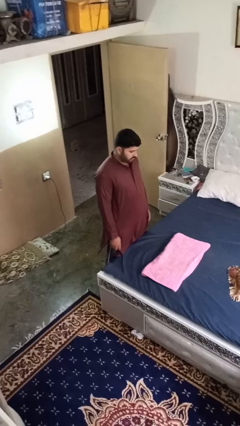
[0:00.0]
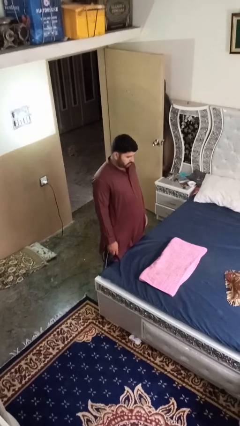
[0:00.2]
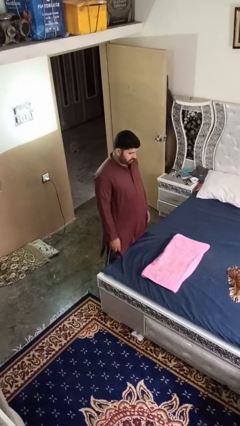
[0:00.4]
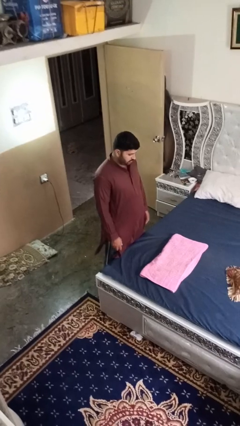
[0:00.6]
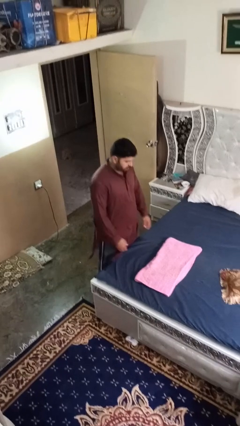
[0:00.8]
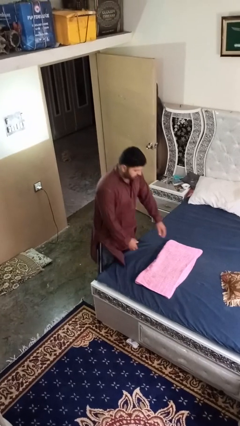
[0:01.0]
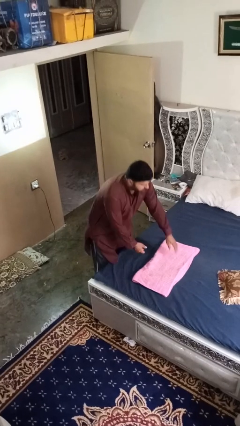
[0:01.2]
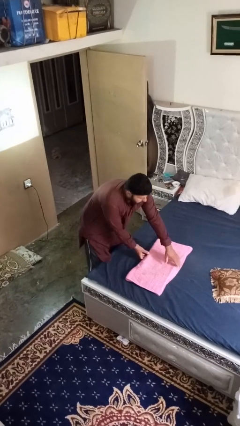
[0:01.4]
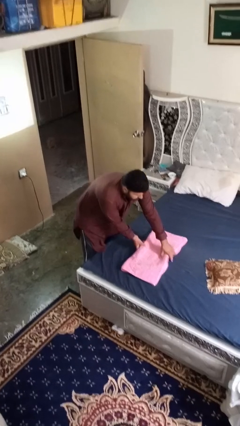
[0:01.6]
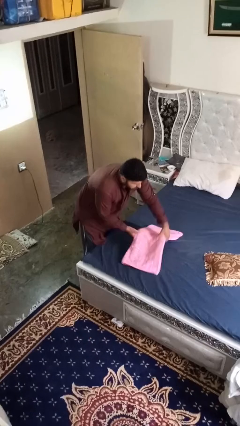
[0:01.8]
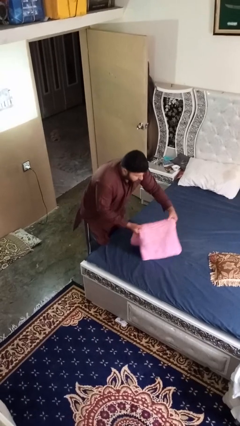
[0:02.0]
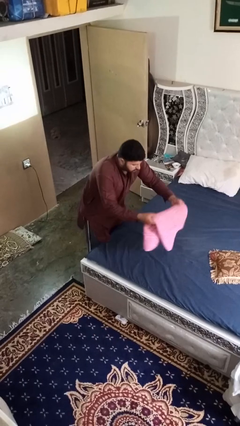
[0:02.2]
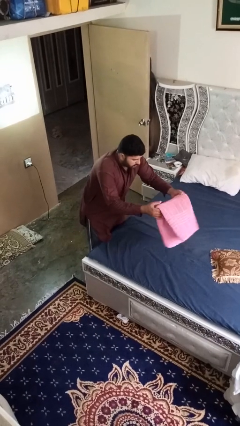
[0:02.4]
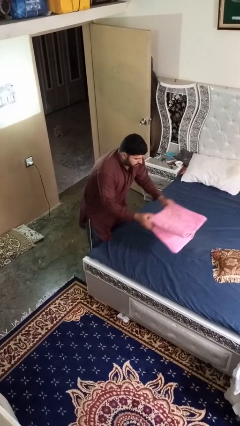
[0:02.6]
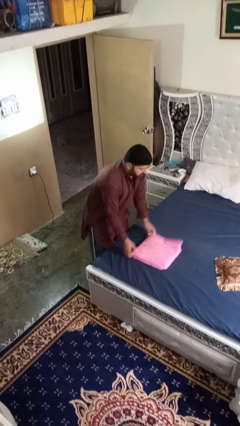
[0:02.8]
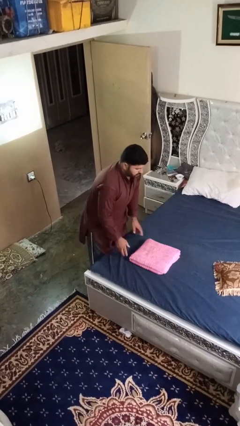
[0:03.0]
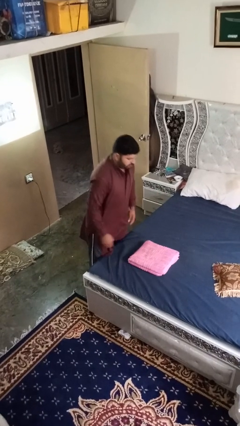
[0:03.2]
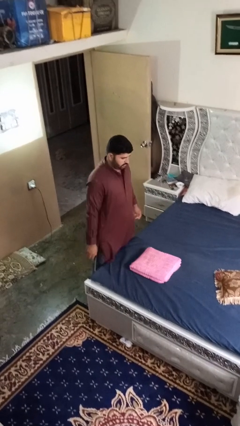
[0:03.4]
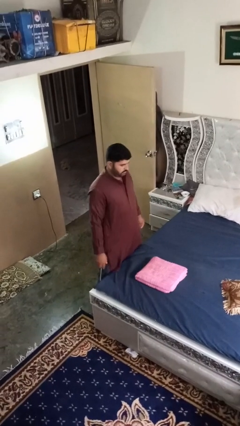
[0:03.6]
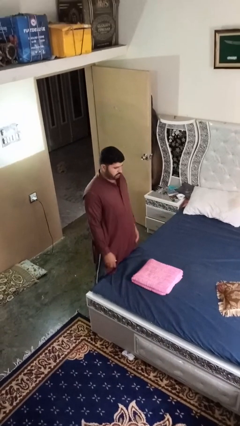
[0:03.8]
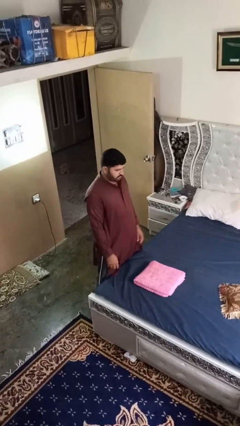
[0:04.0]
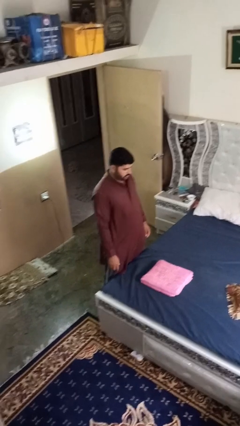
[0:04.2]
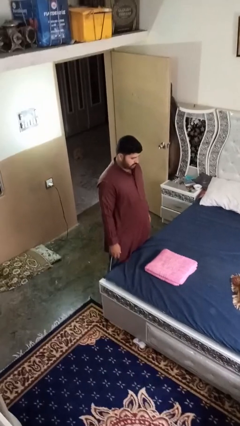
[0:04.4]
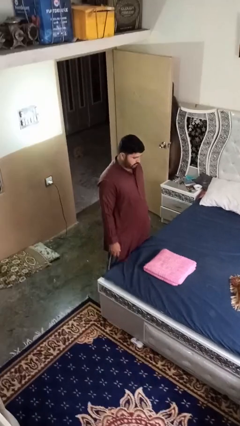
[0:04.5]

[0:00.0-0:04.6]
person folds towel

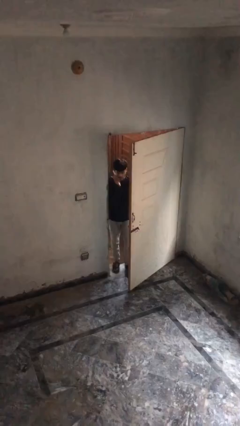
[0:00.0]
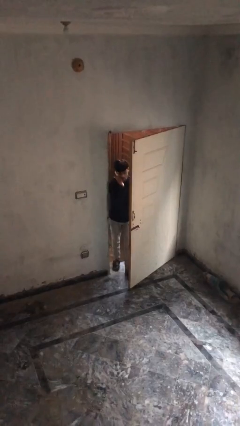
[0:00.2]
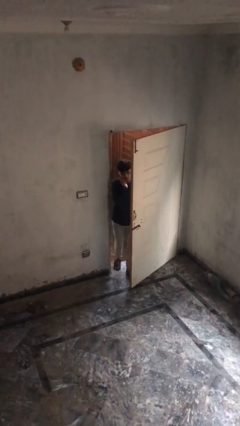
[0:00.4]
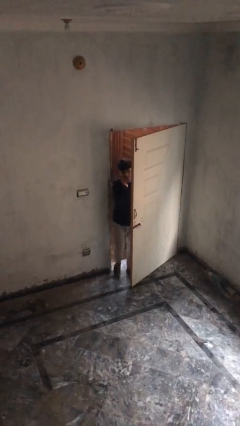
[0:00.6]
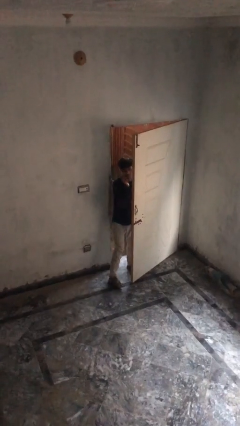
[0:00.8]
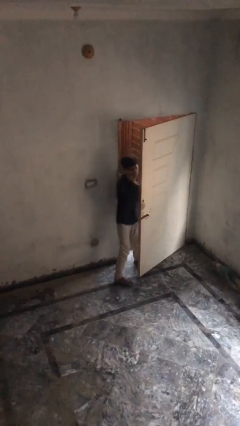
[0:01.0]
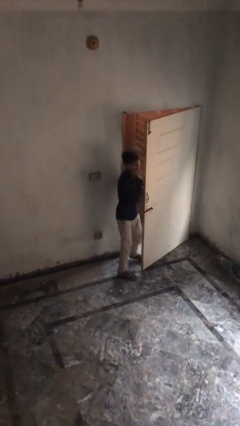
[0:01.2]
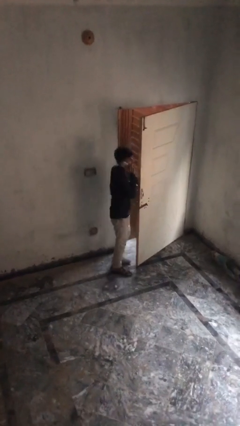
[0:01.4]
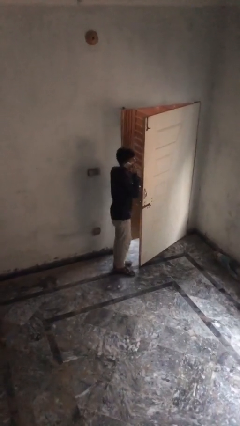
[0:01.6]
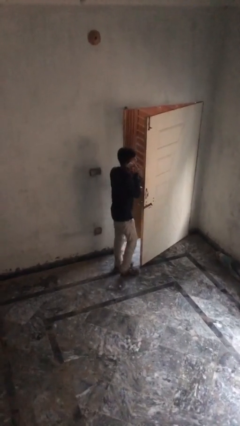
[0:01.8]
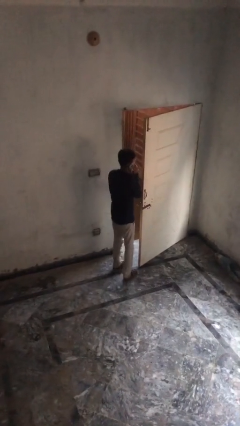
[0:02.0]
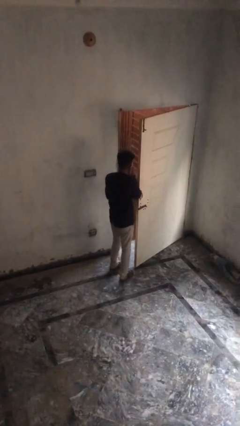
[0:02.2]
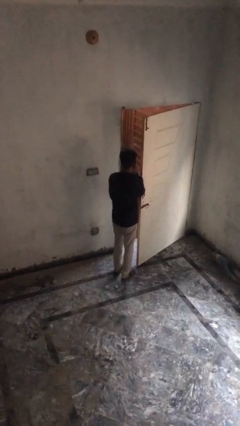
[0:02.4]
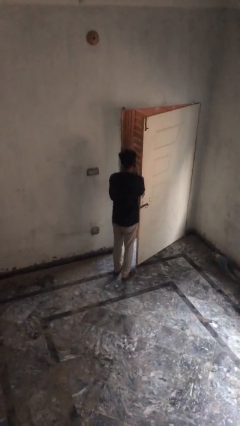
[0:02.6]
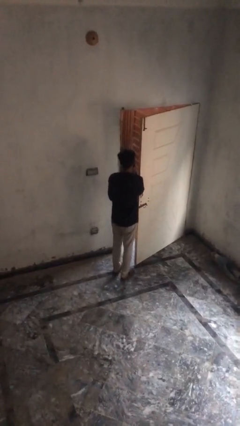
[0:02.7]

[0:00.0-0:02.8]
person enters scene through structure

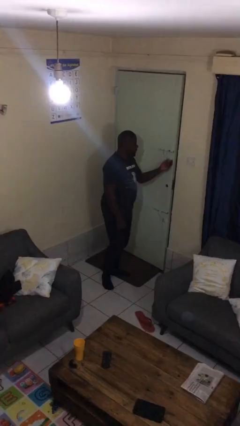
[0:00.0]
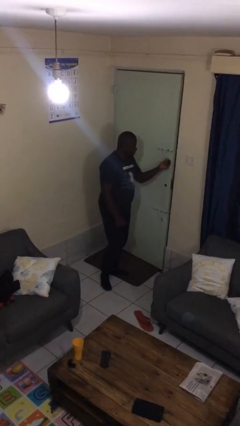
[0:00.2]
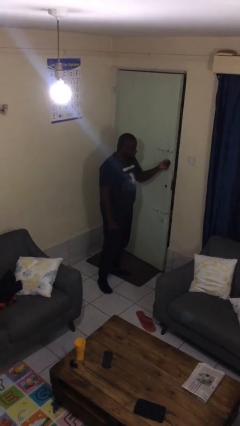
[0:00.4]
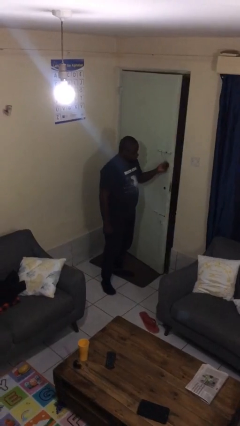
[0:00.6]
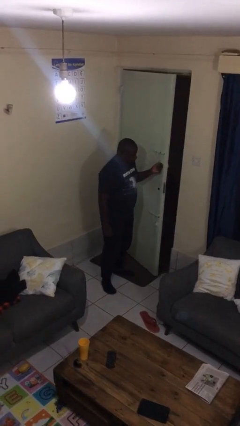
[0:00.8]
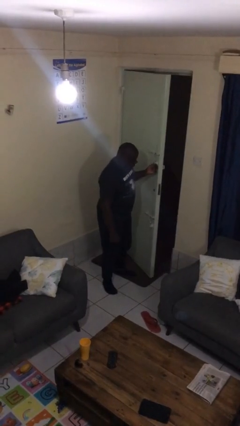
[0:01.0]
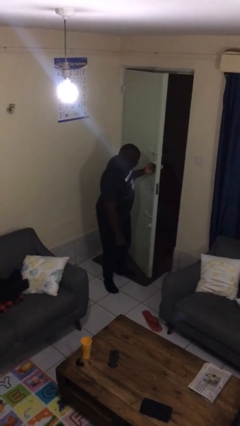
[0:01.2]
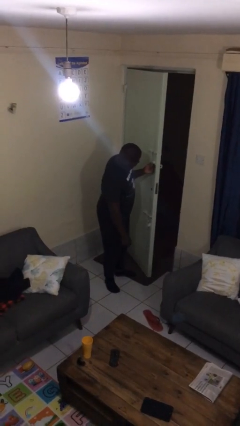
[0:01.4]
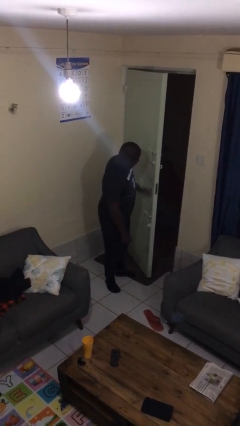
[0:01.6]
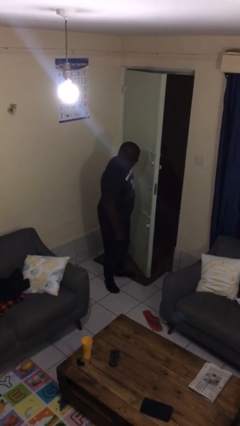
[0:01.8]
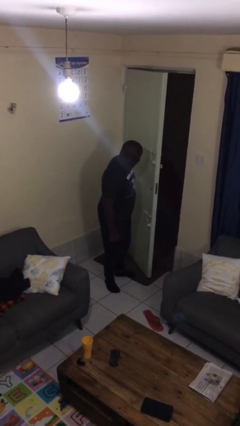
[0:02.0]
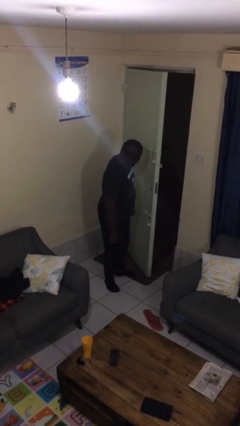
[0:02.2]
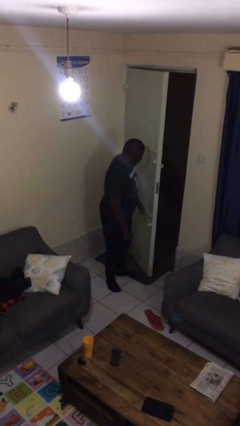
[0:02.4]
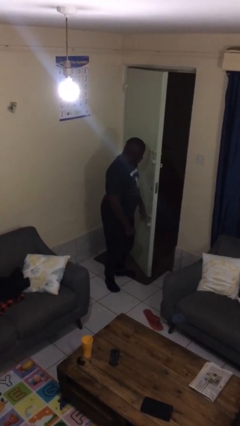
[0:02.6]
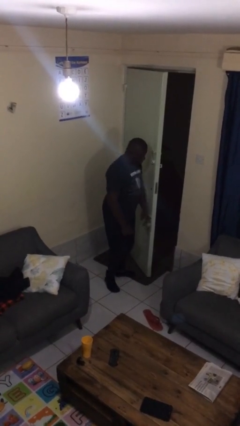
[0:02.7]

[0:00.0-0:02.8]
person opens facility door

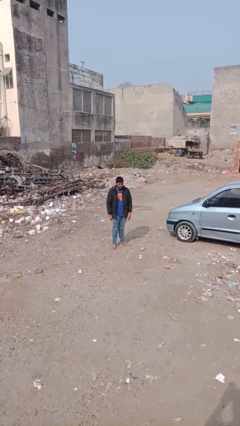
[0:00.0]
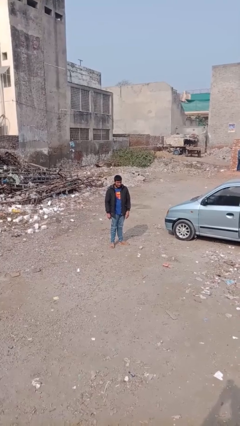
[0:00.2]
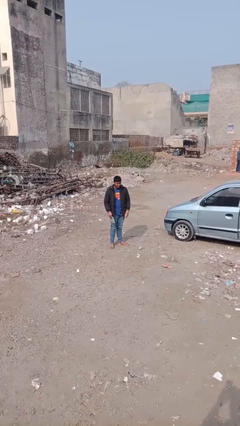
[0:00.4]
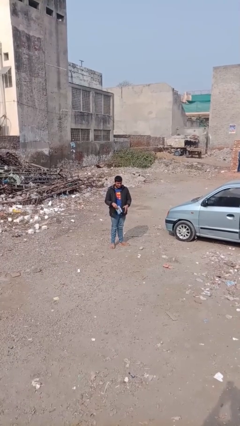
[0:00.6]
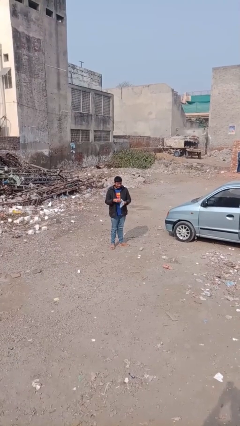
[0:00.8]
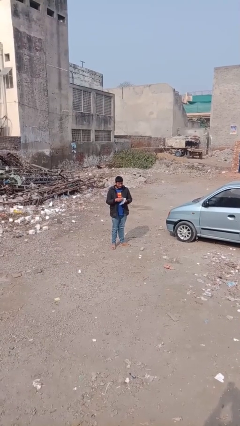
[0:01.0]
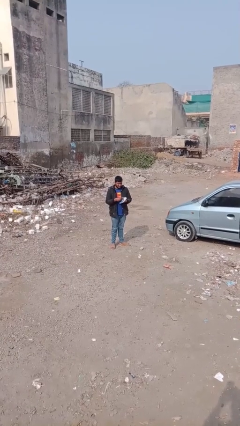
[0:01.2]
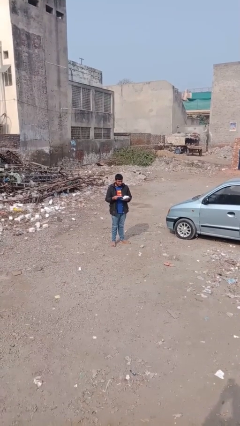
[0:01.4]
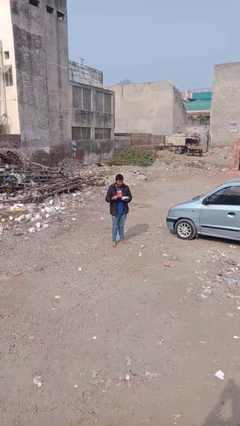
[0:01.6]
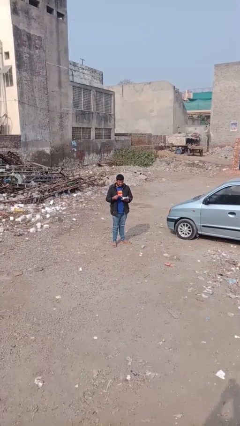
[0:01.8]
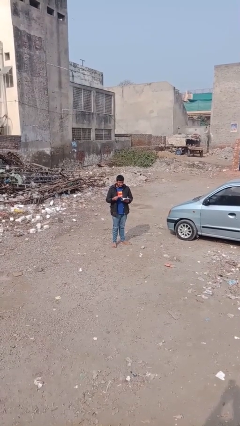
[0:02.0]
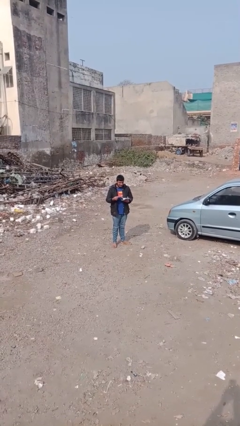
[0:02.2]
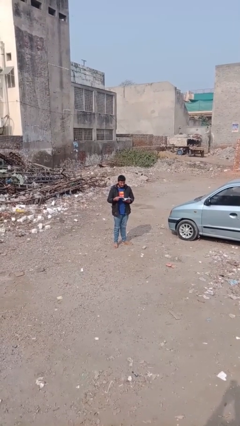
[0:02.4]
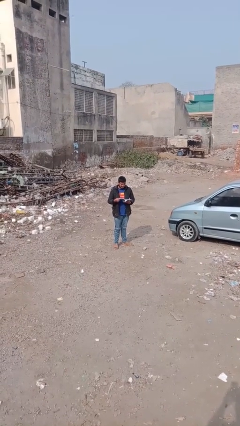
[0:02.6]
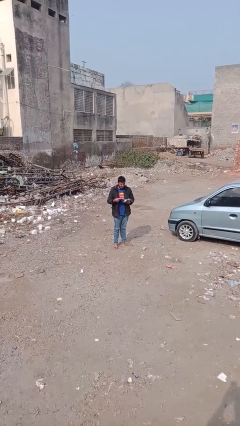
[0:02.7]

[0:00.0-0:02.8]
person reads document

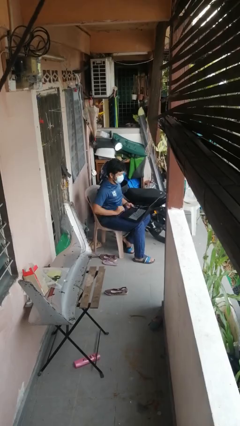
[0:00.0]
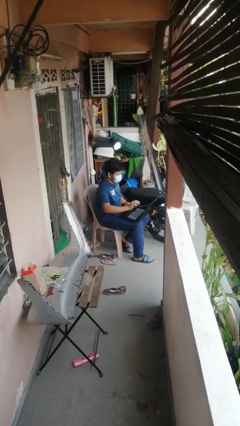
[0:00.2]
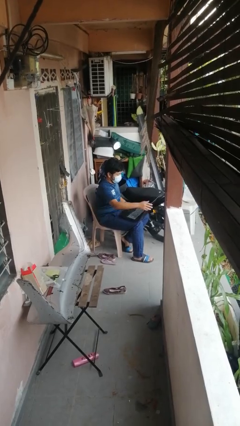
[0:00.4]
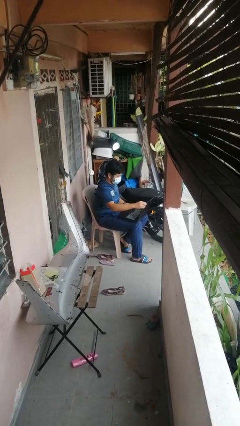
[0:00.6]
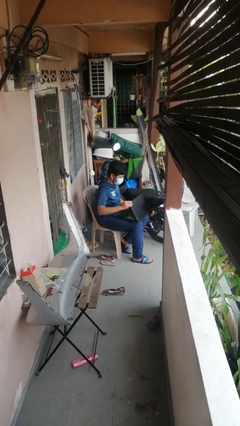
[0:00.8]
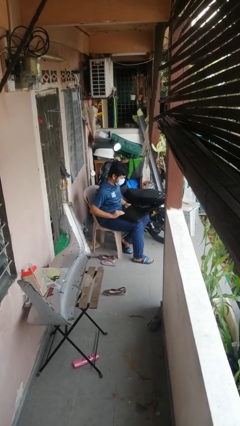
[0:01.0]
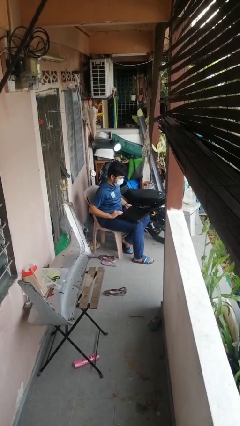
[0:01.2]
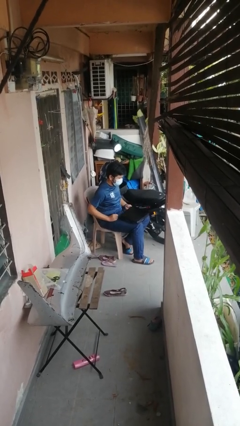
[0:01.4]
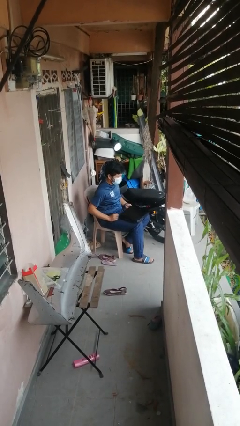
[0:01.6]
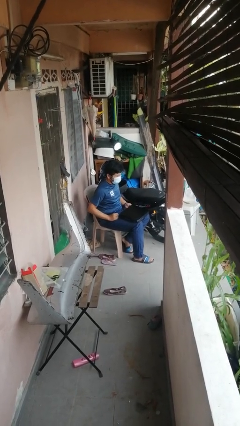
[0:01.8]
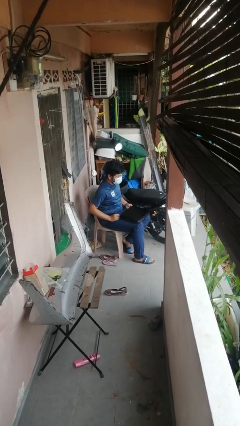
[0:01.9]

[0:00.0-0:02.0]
person closes laptop

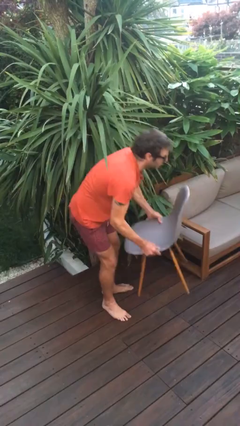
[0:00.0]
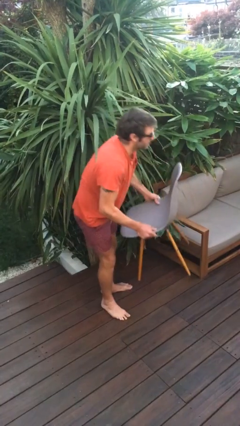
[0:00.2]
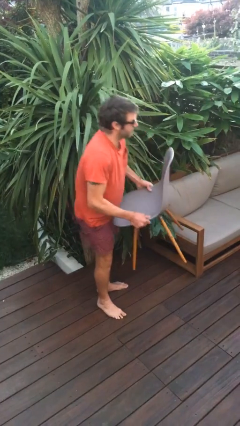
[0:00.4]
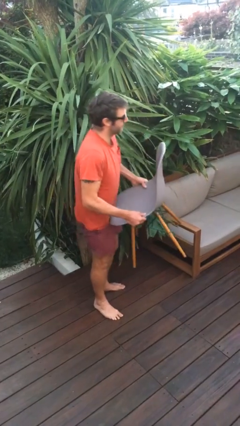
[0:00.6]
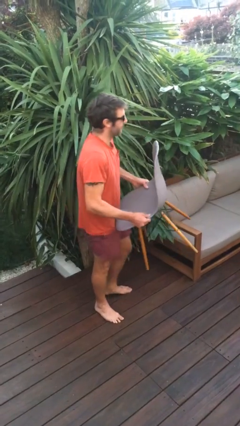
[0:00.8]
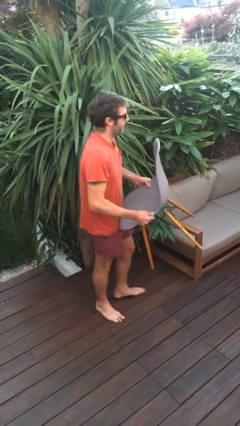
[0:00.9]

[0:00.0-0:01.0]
person picks up object from floor

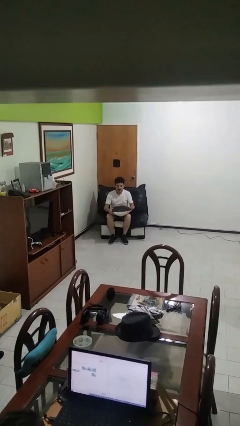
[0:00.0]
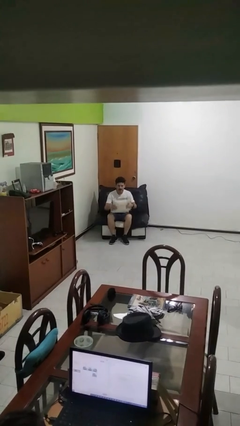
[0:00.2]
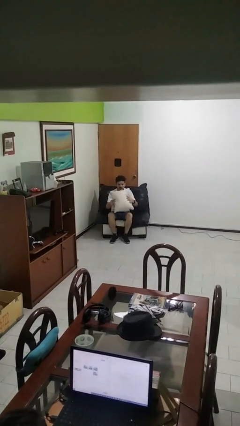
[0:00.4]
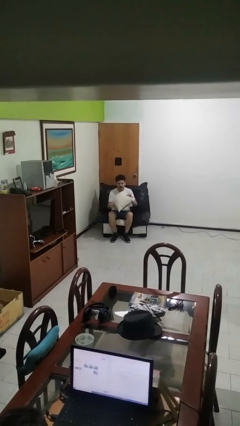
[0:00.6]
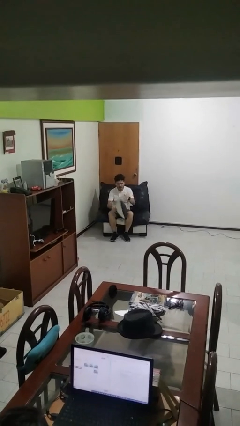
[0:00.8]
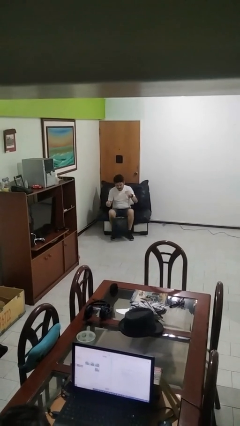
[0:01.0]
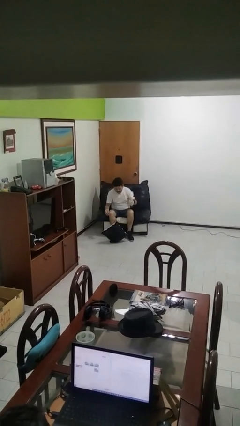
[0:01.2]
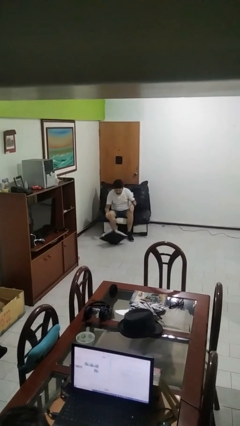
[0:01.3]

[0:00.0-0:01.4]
person drops object
